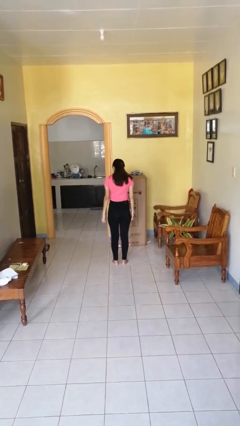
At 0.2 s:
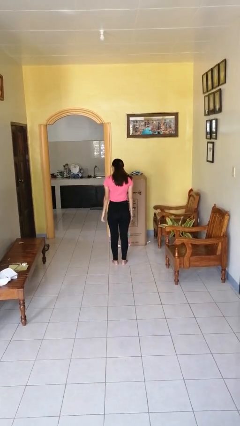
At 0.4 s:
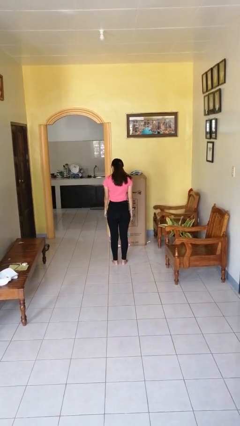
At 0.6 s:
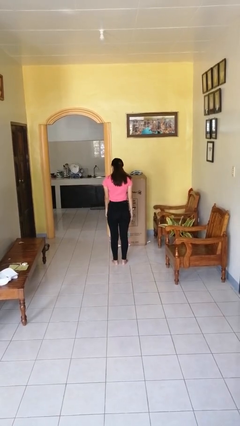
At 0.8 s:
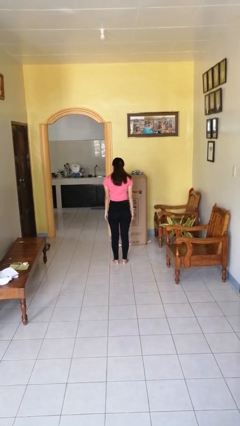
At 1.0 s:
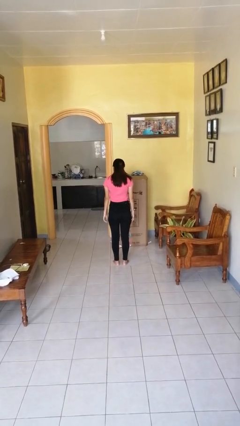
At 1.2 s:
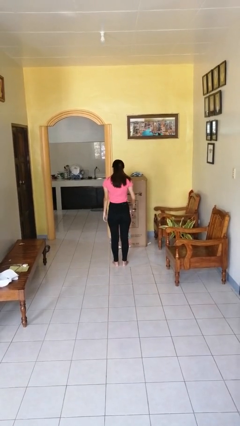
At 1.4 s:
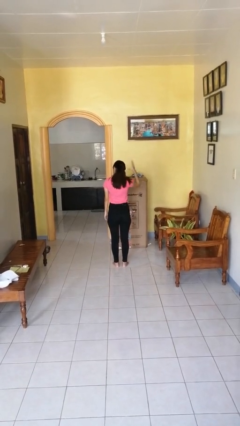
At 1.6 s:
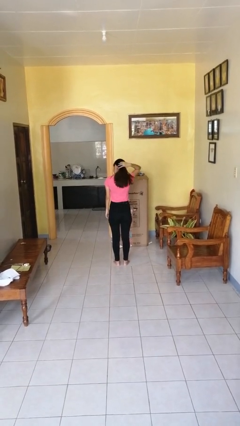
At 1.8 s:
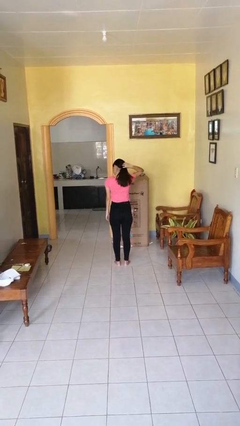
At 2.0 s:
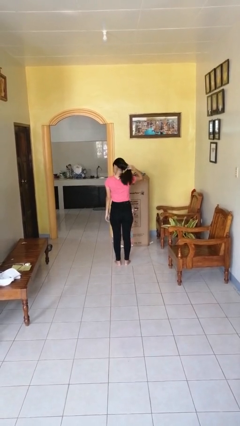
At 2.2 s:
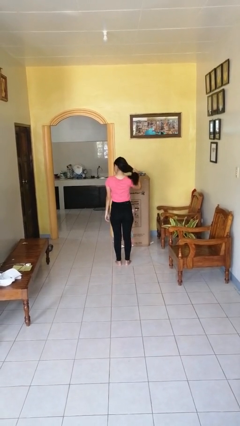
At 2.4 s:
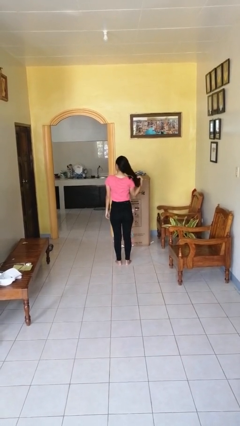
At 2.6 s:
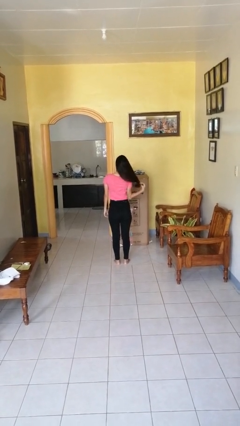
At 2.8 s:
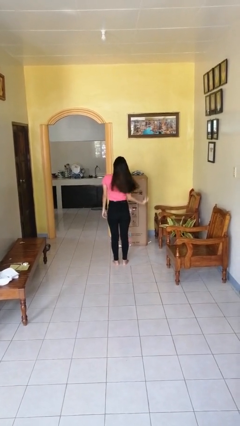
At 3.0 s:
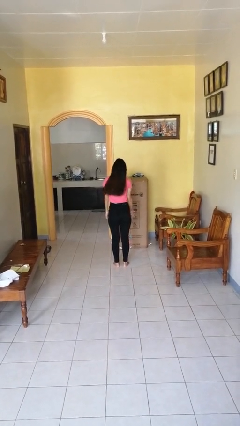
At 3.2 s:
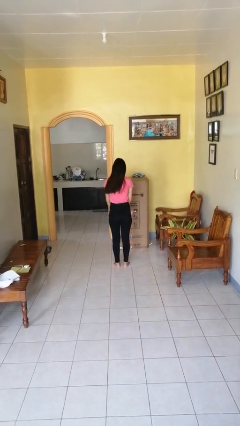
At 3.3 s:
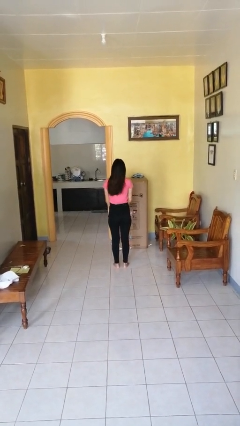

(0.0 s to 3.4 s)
person takes off hairtie

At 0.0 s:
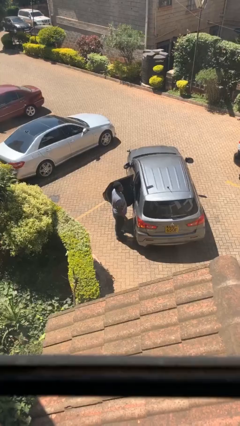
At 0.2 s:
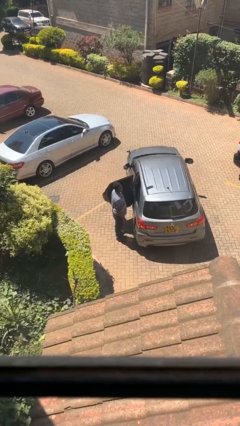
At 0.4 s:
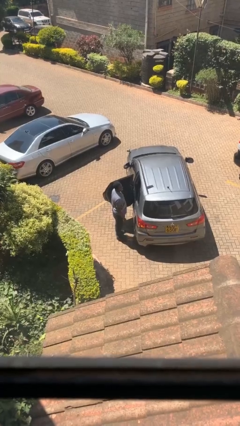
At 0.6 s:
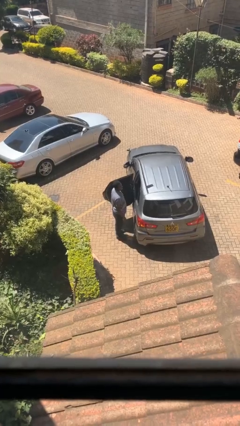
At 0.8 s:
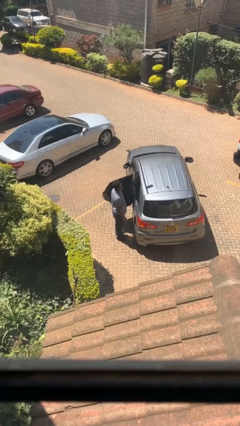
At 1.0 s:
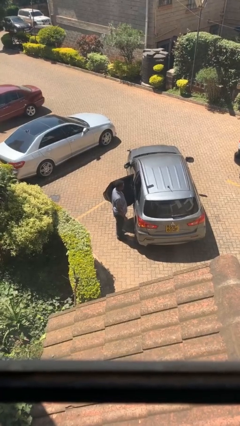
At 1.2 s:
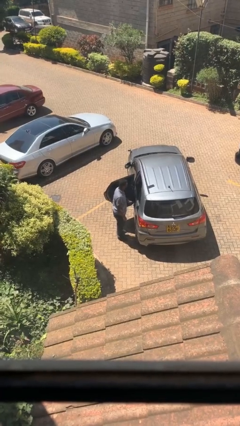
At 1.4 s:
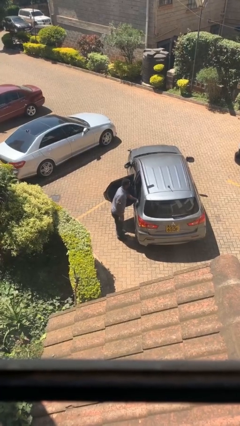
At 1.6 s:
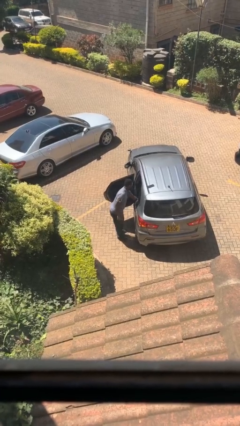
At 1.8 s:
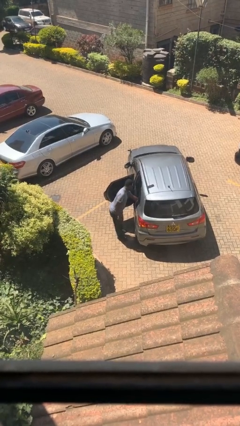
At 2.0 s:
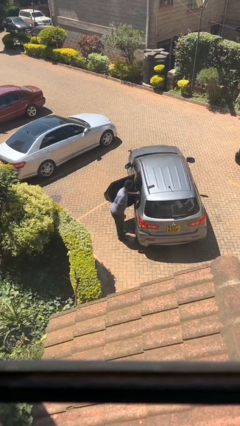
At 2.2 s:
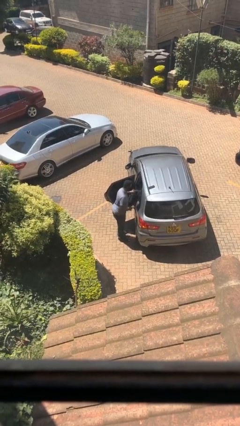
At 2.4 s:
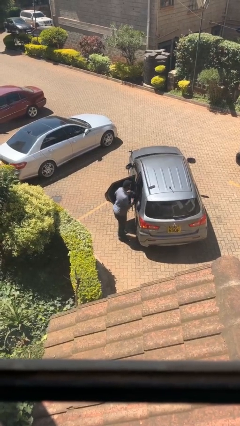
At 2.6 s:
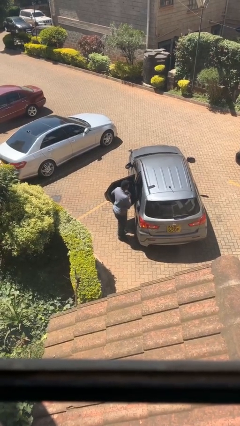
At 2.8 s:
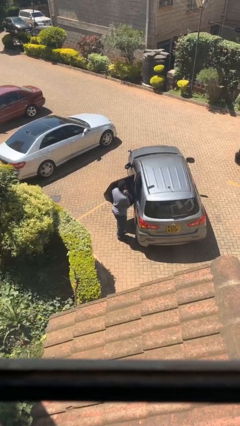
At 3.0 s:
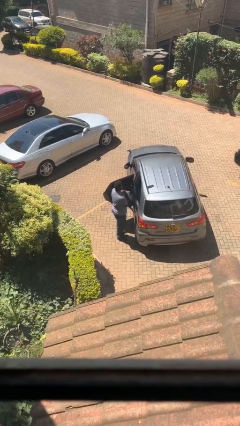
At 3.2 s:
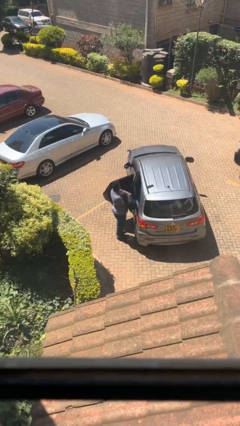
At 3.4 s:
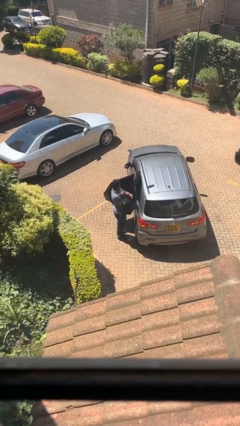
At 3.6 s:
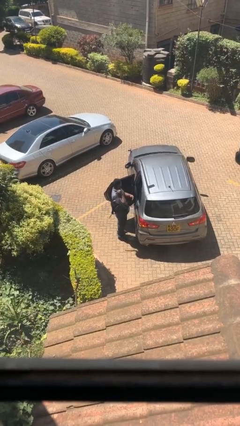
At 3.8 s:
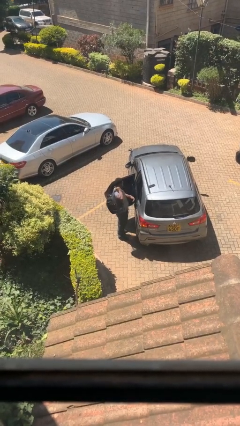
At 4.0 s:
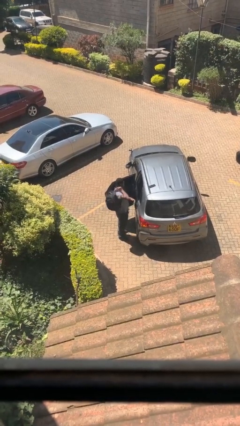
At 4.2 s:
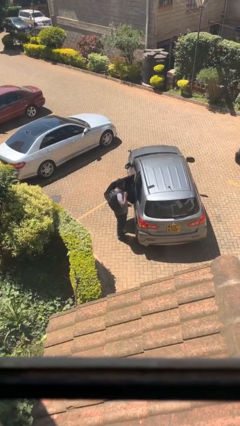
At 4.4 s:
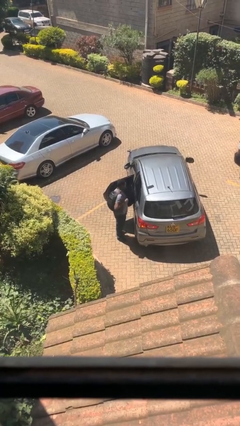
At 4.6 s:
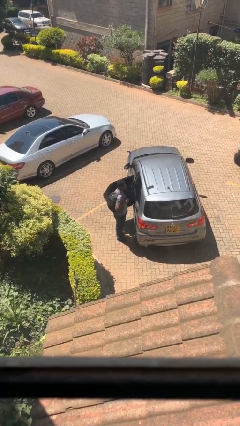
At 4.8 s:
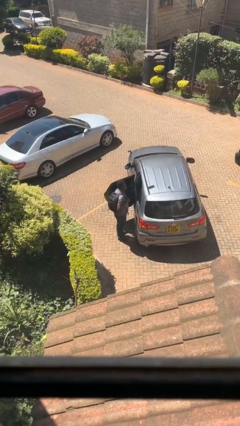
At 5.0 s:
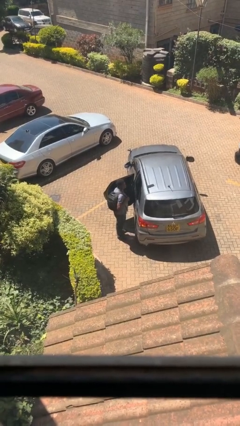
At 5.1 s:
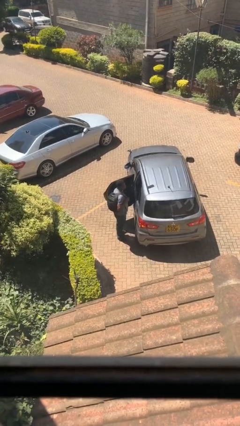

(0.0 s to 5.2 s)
person unloads car

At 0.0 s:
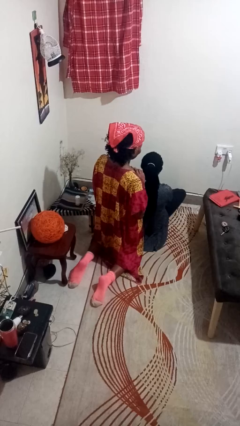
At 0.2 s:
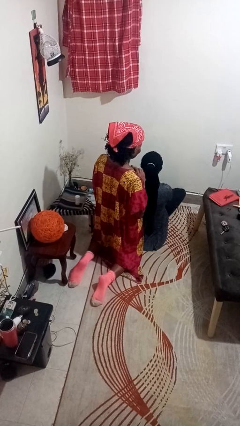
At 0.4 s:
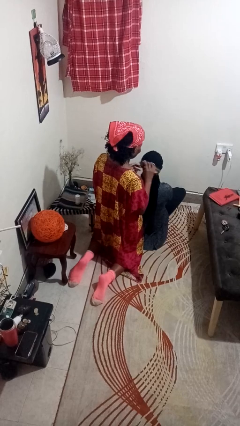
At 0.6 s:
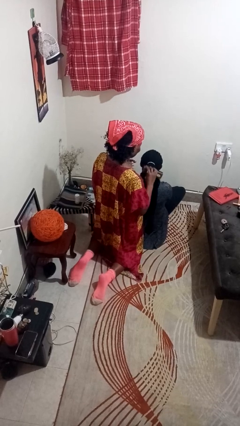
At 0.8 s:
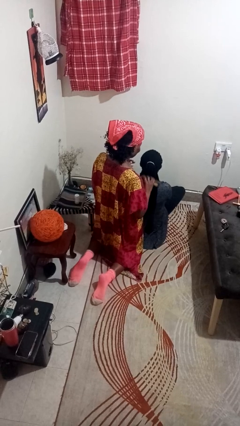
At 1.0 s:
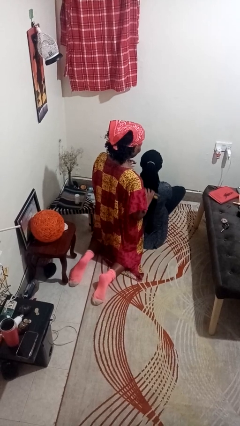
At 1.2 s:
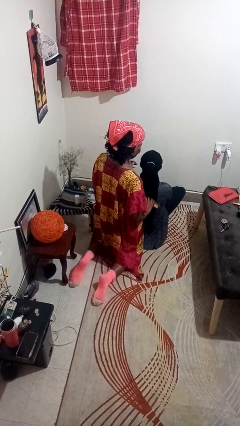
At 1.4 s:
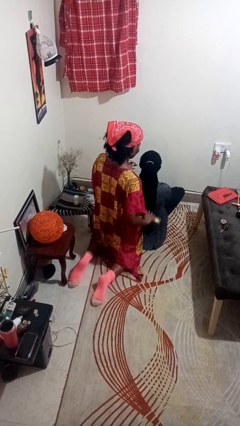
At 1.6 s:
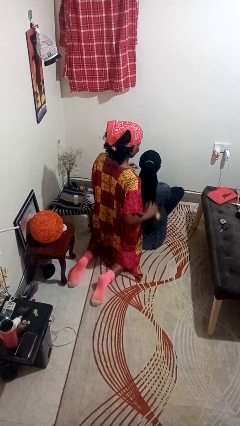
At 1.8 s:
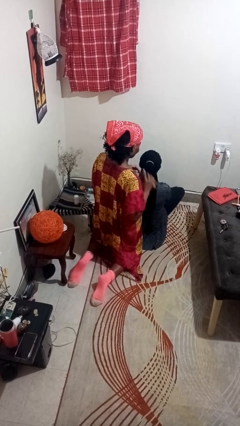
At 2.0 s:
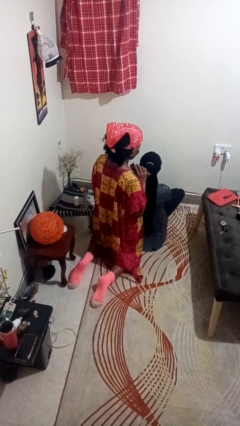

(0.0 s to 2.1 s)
person brushes hair of person

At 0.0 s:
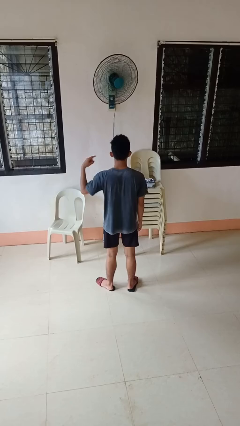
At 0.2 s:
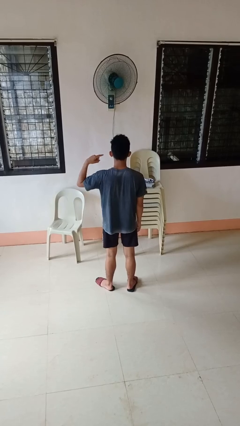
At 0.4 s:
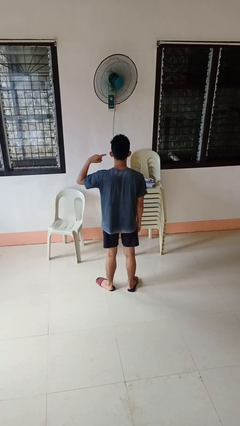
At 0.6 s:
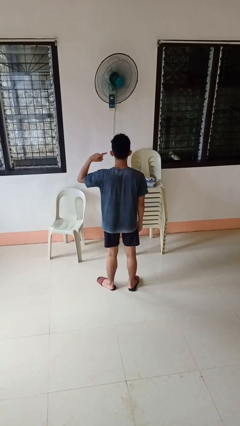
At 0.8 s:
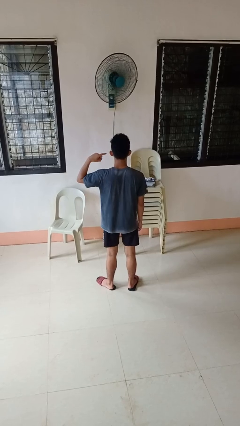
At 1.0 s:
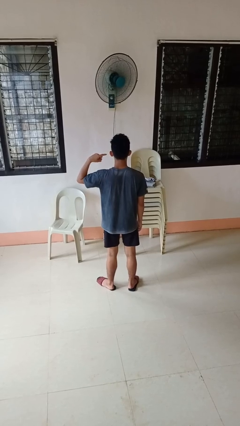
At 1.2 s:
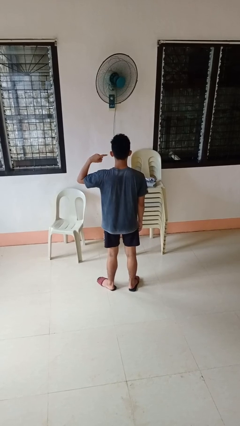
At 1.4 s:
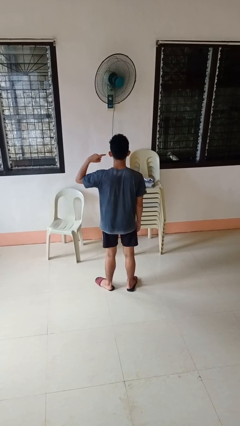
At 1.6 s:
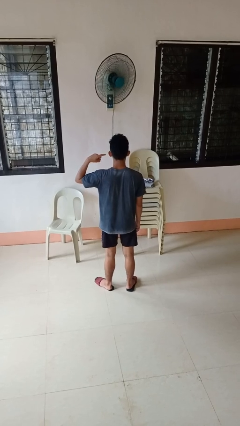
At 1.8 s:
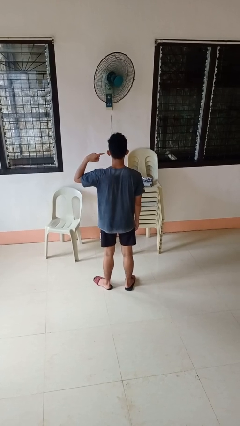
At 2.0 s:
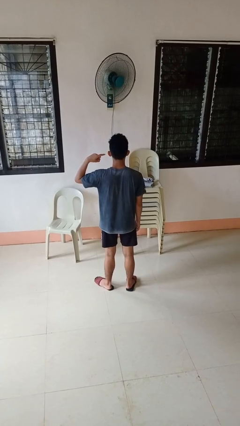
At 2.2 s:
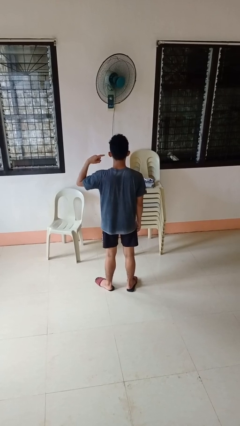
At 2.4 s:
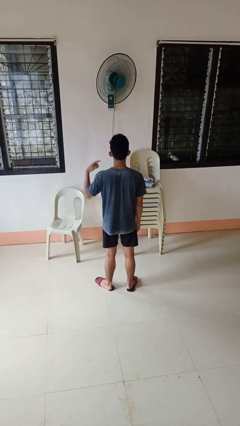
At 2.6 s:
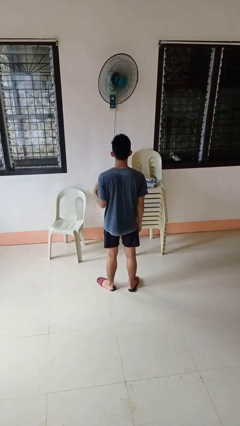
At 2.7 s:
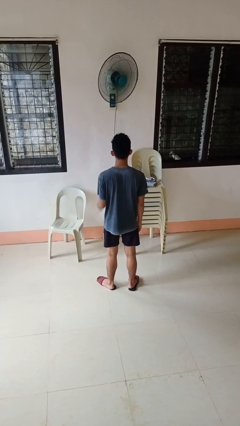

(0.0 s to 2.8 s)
person gestures listen closely

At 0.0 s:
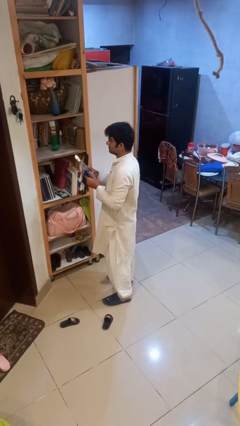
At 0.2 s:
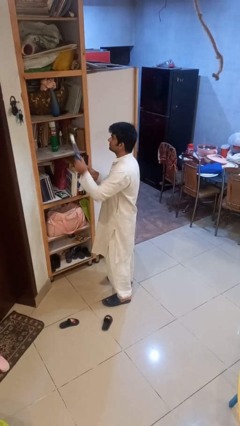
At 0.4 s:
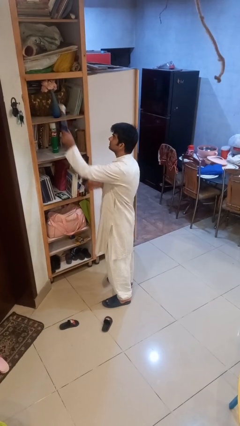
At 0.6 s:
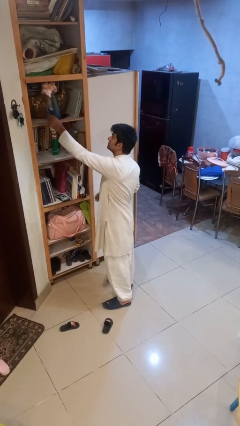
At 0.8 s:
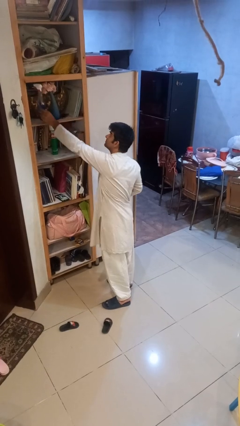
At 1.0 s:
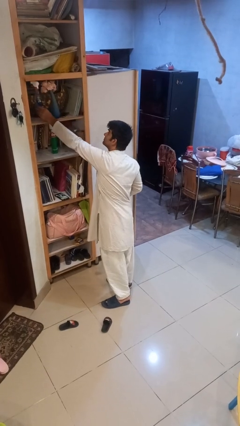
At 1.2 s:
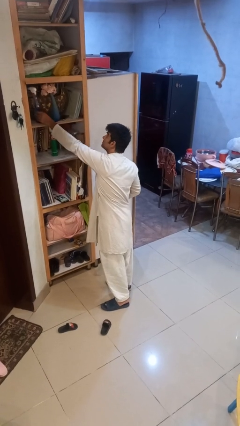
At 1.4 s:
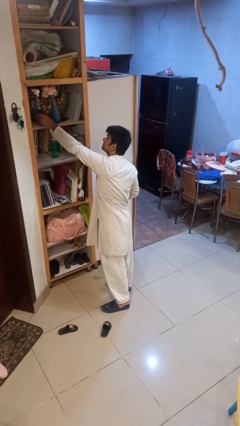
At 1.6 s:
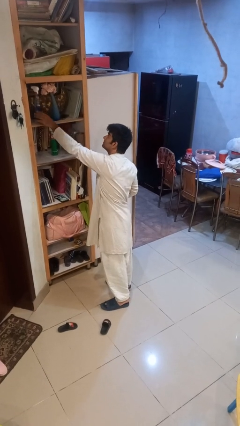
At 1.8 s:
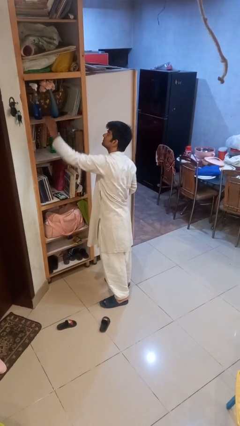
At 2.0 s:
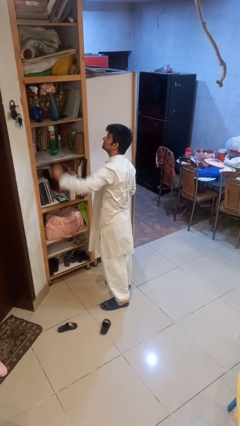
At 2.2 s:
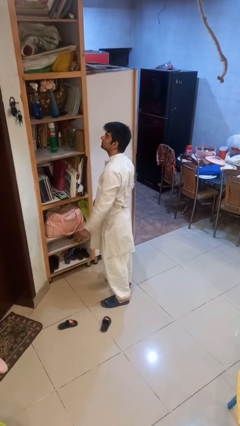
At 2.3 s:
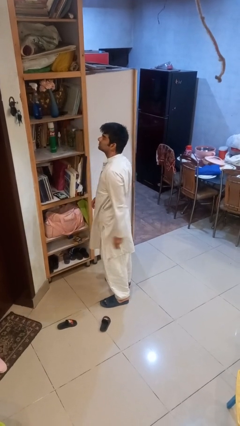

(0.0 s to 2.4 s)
person puts down object on shelf

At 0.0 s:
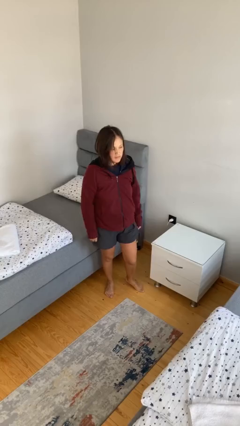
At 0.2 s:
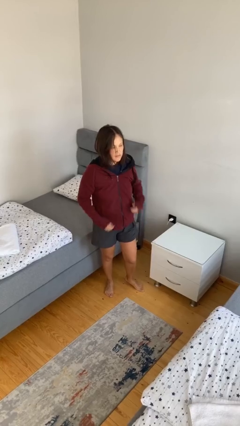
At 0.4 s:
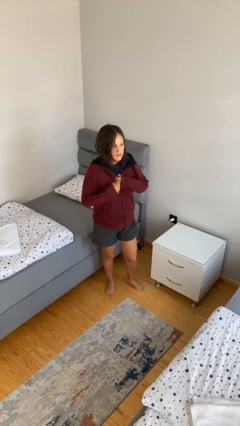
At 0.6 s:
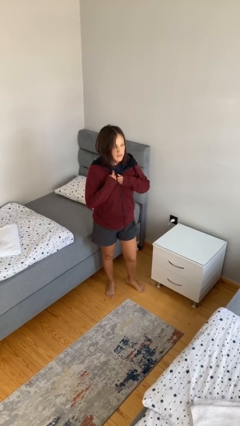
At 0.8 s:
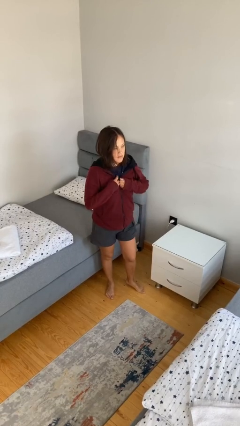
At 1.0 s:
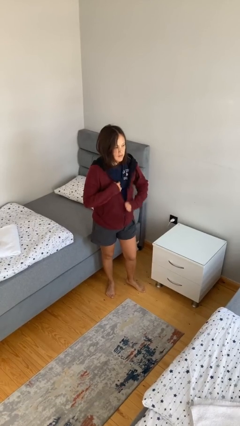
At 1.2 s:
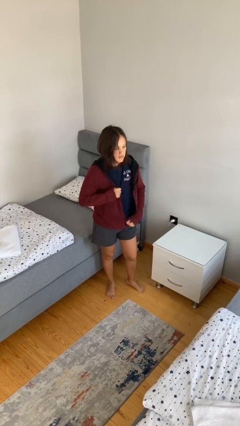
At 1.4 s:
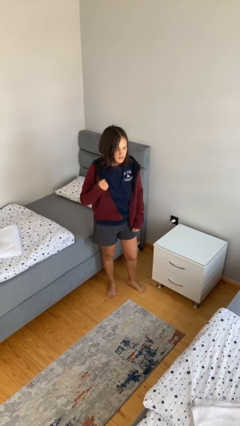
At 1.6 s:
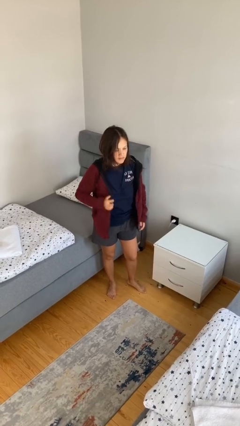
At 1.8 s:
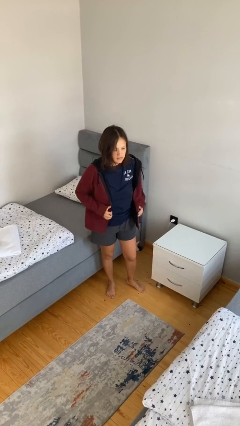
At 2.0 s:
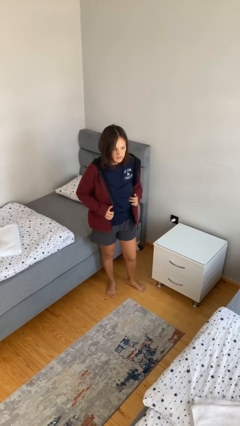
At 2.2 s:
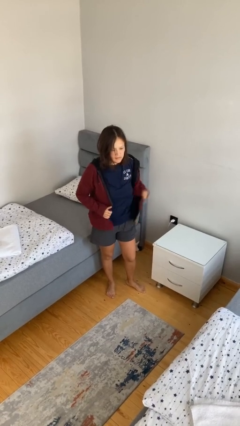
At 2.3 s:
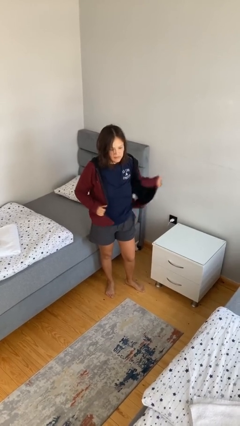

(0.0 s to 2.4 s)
person unzips jacket
